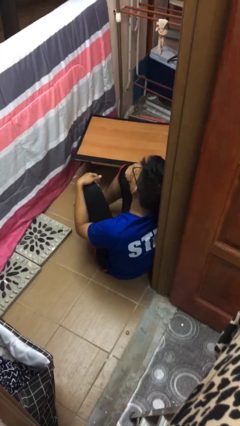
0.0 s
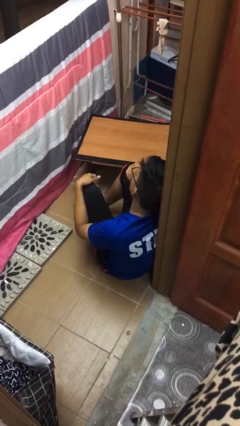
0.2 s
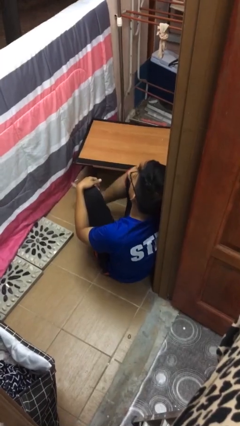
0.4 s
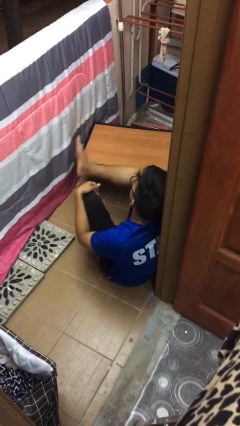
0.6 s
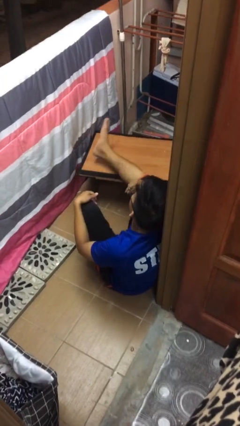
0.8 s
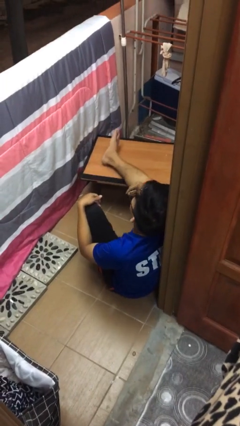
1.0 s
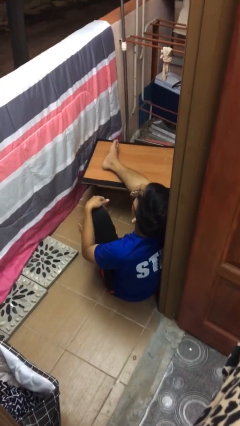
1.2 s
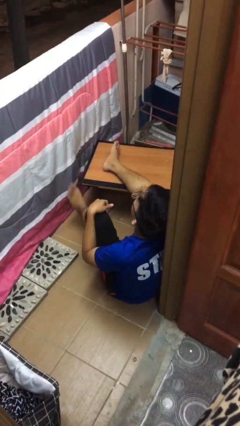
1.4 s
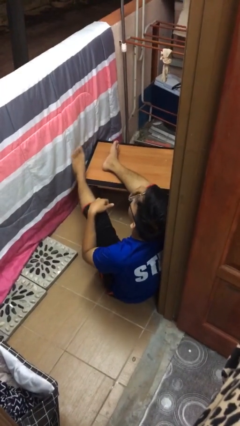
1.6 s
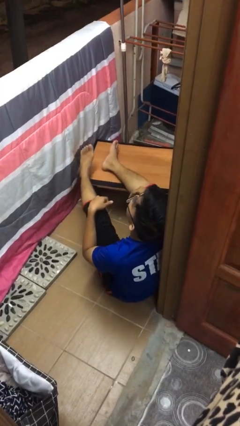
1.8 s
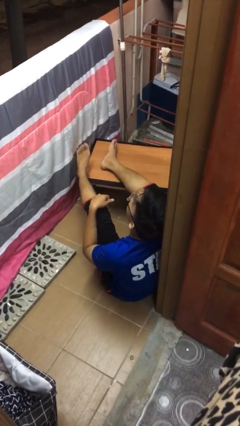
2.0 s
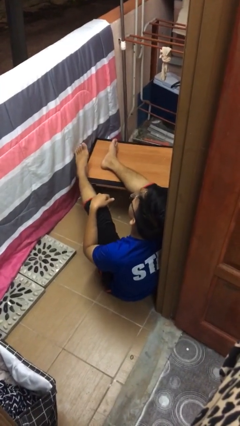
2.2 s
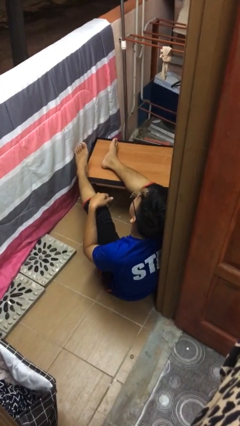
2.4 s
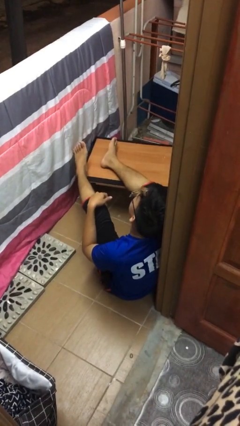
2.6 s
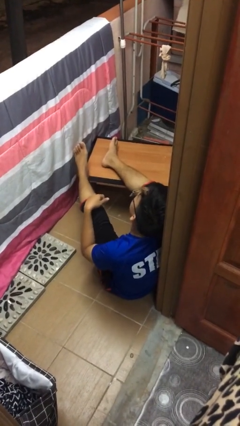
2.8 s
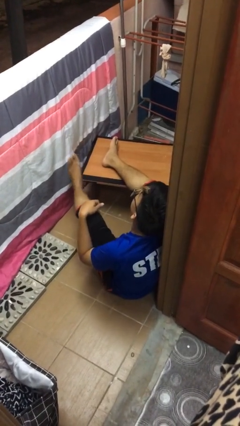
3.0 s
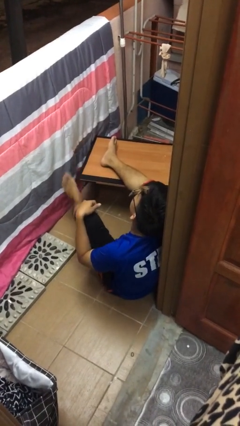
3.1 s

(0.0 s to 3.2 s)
person puts feet up

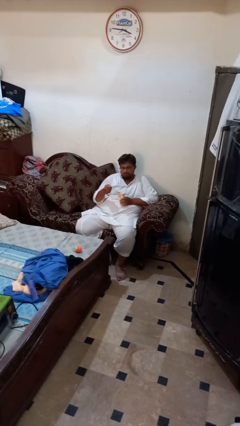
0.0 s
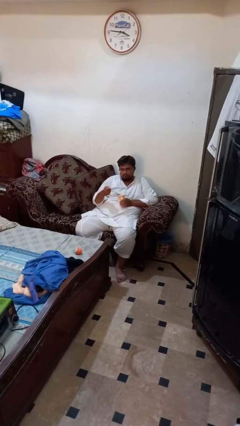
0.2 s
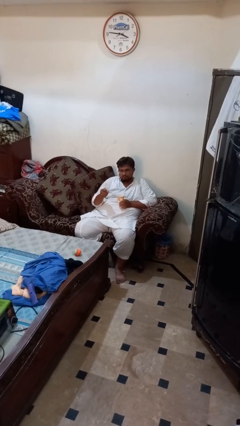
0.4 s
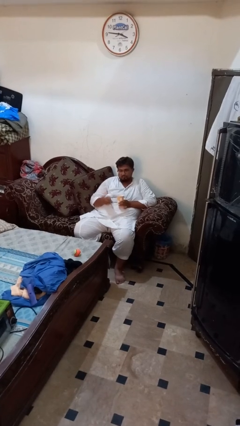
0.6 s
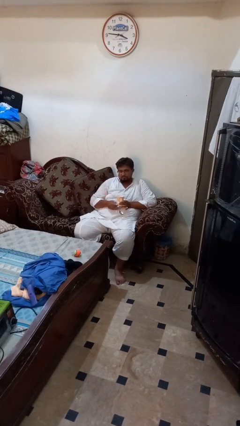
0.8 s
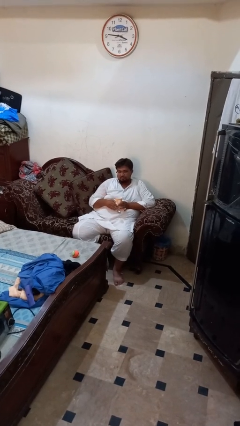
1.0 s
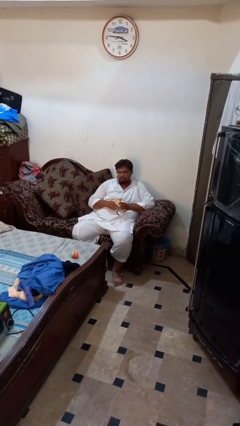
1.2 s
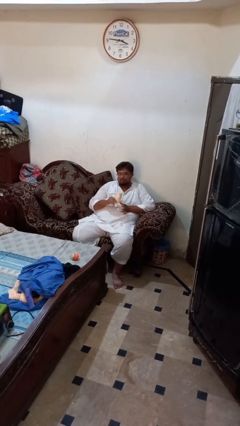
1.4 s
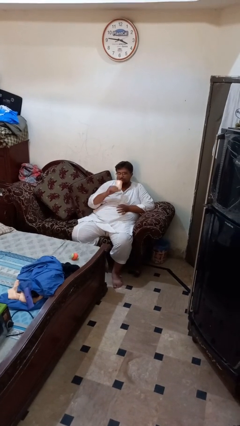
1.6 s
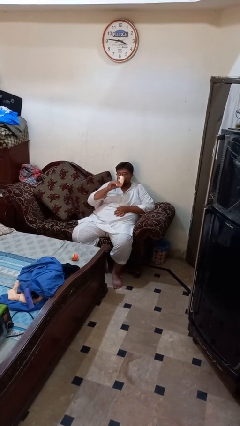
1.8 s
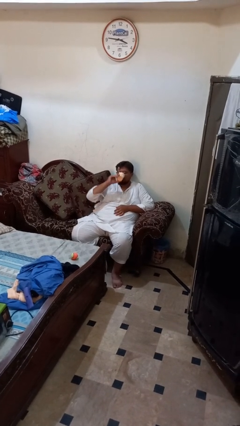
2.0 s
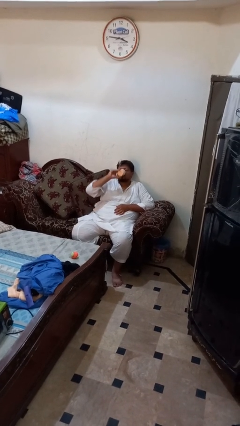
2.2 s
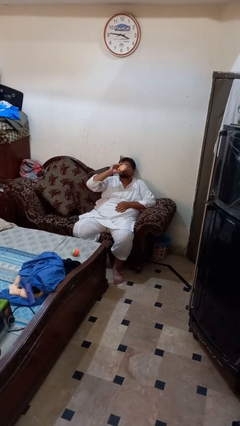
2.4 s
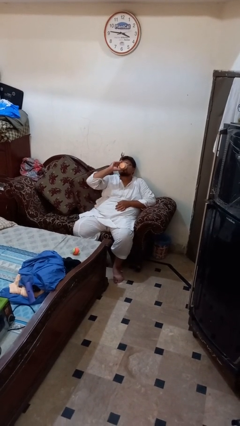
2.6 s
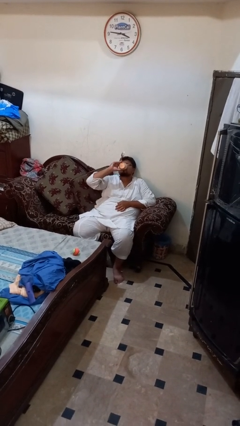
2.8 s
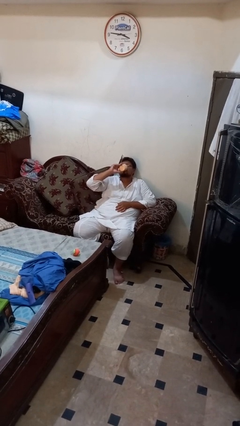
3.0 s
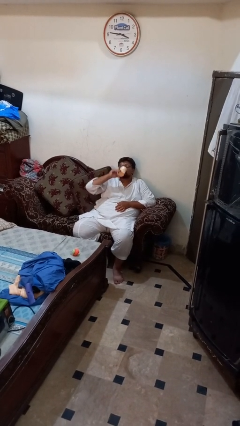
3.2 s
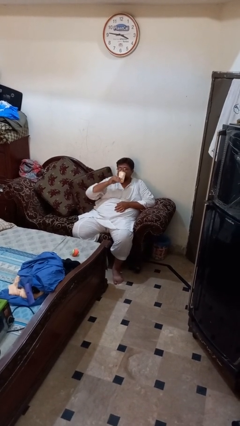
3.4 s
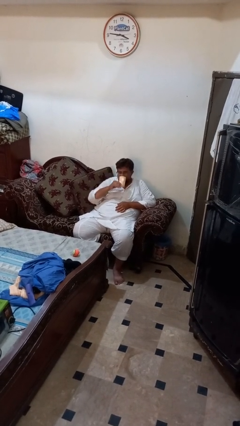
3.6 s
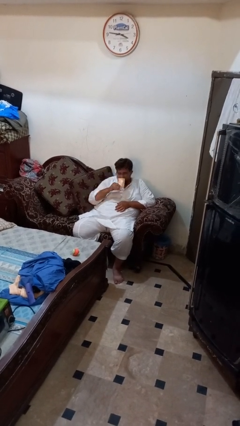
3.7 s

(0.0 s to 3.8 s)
person drinks from mug

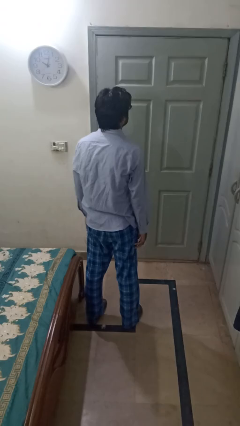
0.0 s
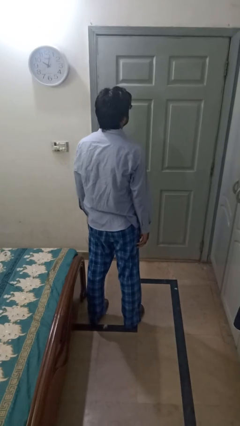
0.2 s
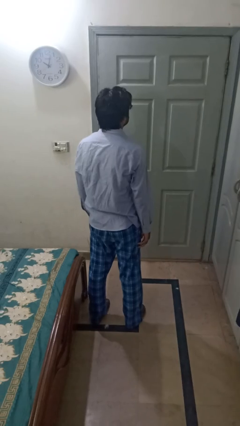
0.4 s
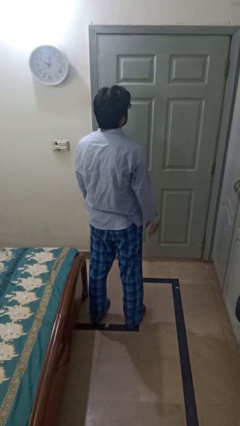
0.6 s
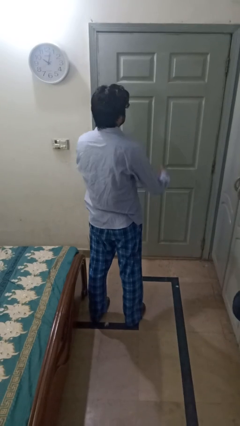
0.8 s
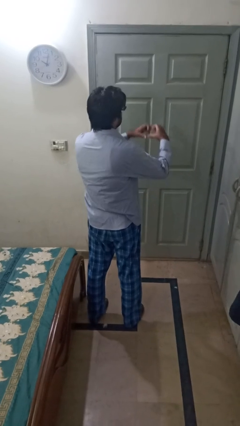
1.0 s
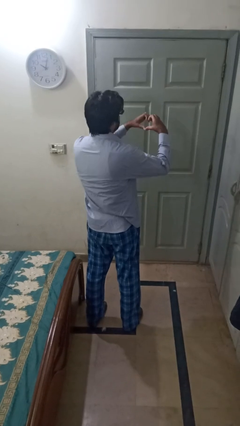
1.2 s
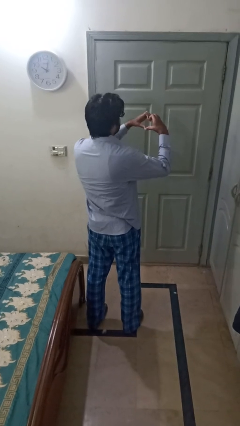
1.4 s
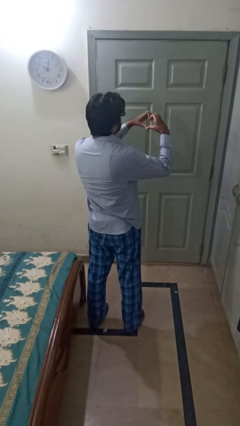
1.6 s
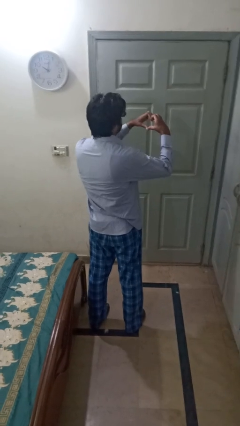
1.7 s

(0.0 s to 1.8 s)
person gestures heart

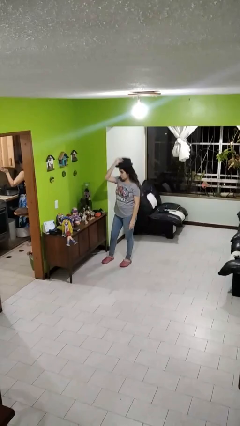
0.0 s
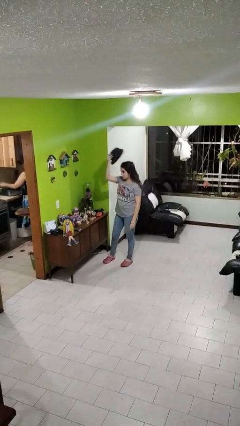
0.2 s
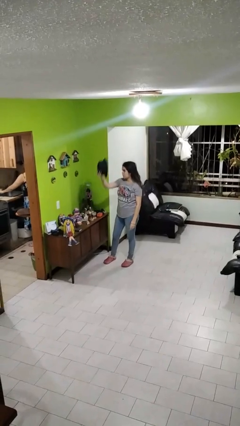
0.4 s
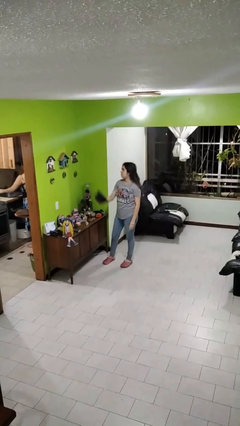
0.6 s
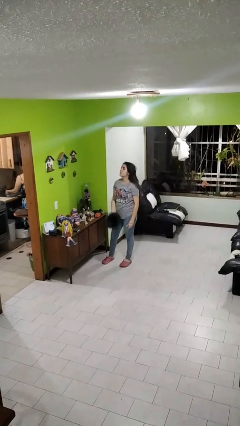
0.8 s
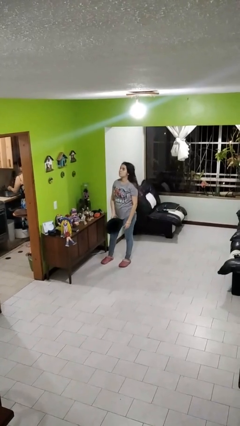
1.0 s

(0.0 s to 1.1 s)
person takes off hat

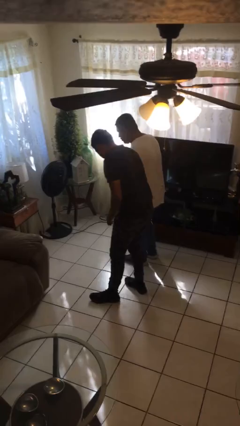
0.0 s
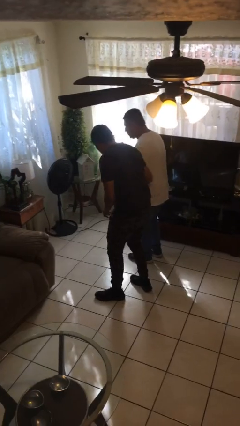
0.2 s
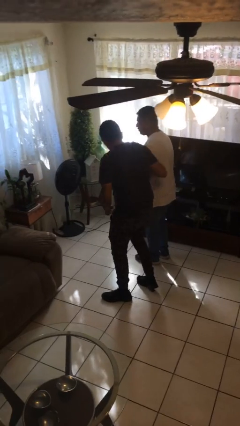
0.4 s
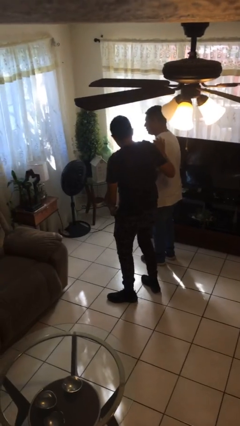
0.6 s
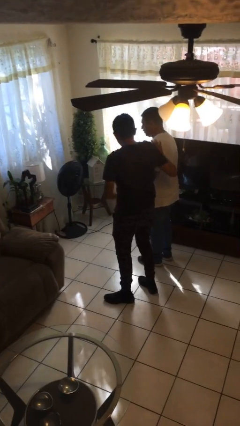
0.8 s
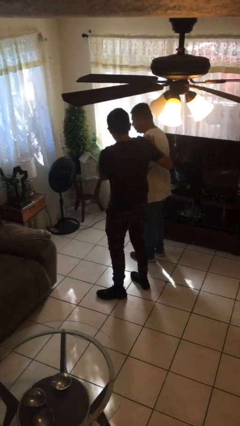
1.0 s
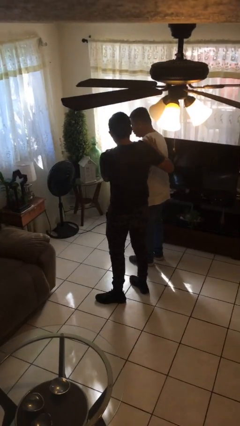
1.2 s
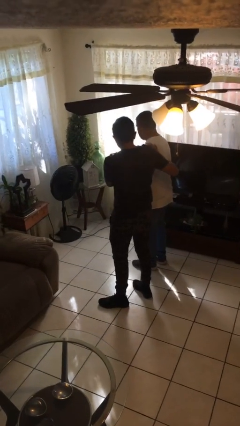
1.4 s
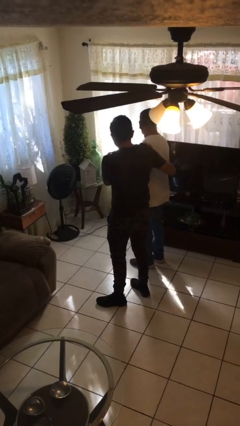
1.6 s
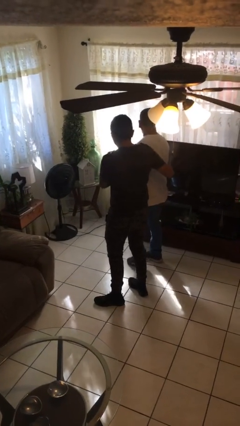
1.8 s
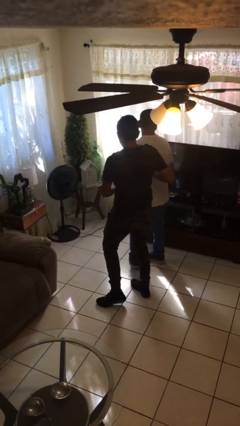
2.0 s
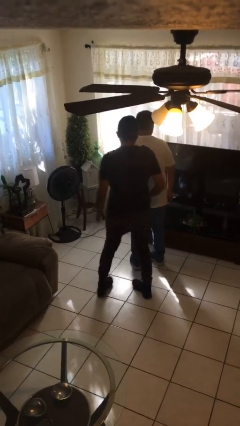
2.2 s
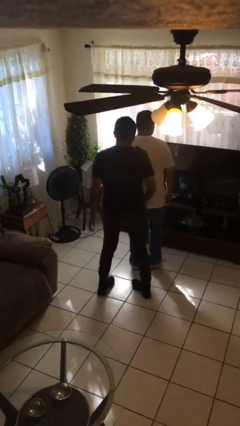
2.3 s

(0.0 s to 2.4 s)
person bumps into person

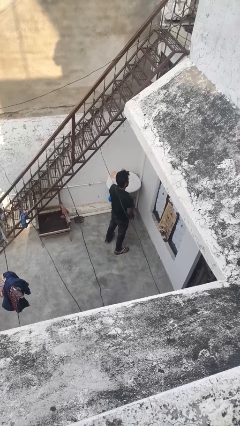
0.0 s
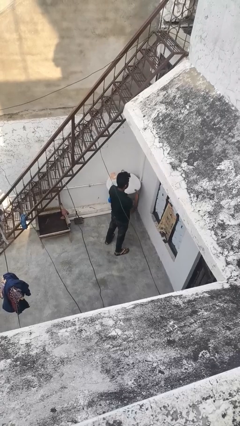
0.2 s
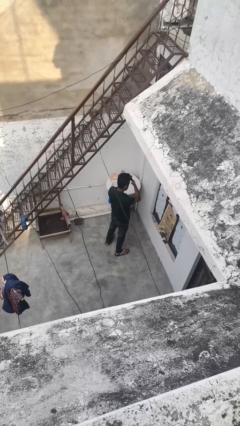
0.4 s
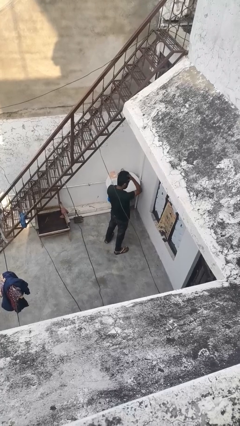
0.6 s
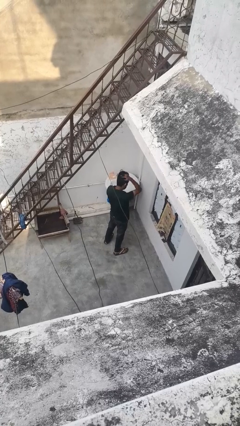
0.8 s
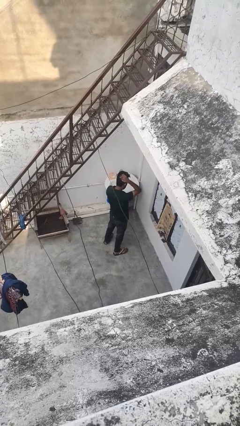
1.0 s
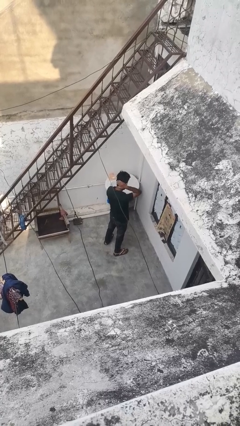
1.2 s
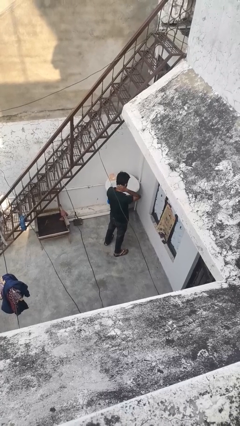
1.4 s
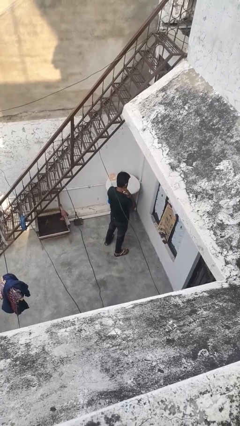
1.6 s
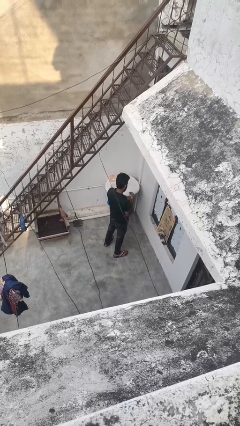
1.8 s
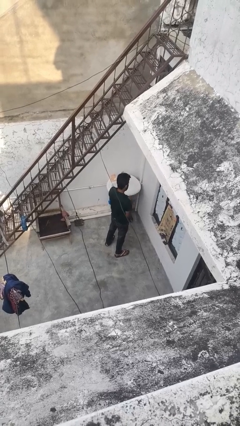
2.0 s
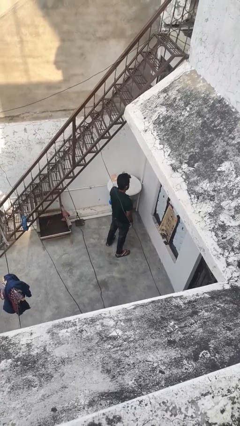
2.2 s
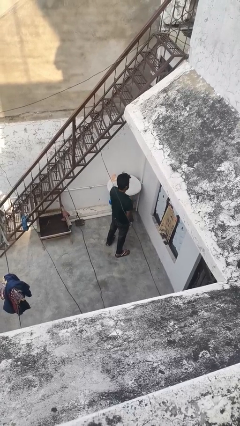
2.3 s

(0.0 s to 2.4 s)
person strokes hair

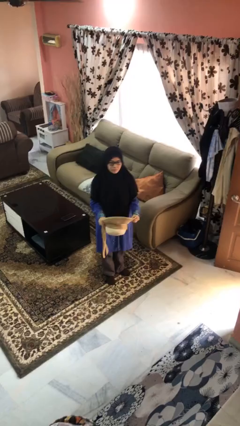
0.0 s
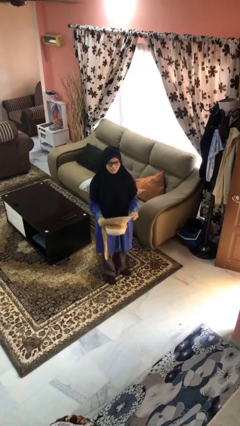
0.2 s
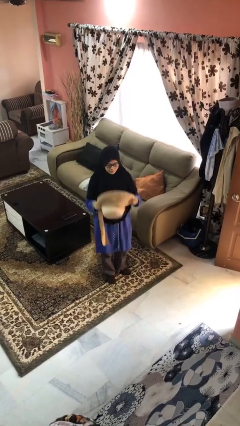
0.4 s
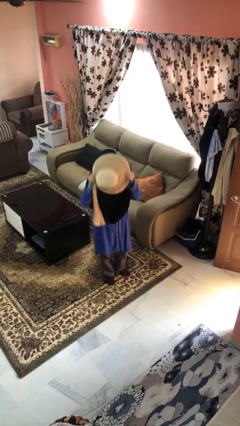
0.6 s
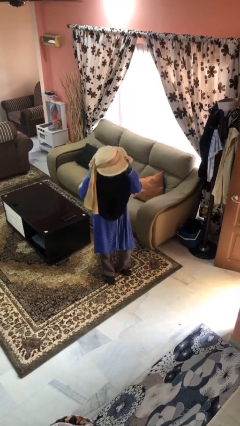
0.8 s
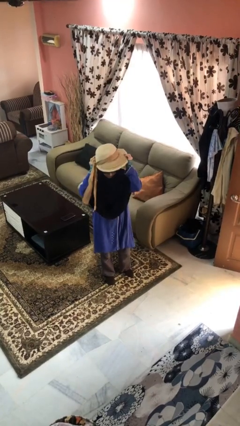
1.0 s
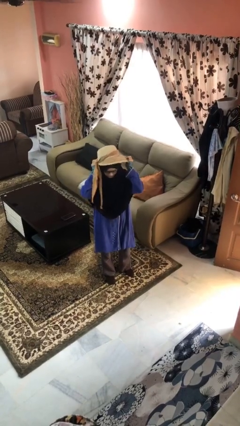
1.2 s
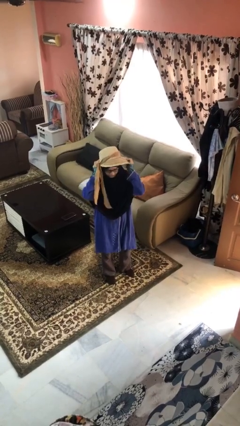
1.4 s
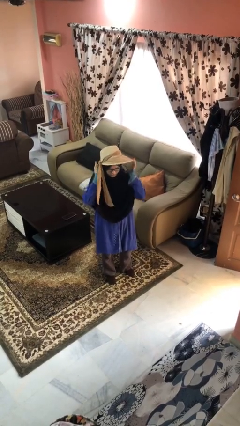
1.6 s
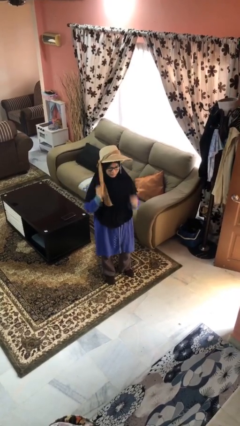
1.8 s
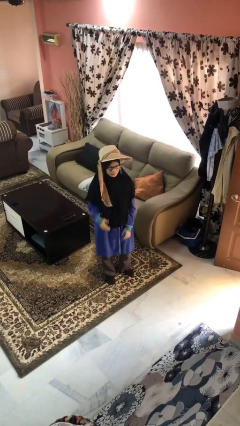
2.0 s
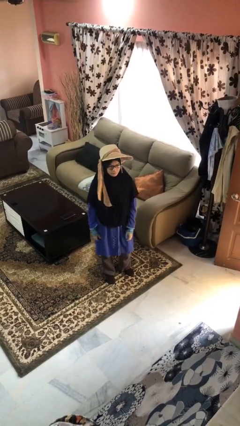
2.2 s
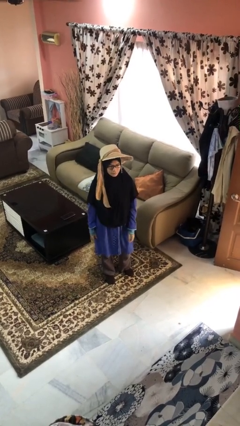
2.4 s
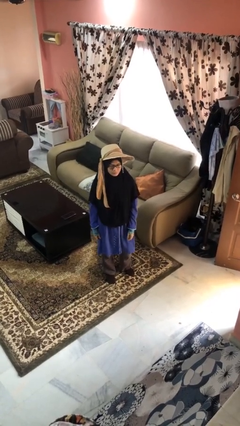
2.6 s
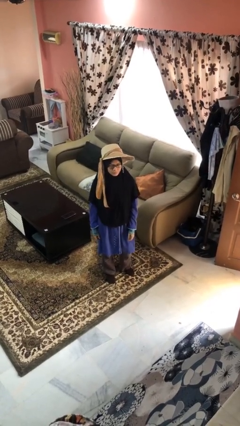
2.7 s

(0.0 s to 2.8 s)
person puts on hat
